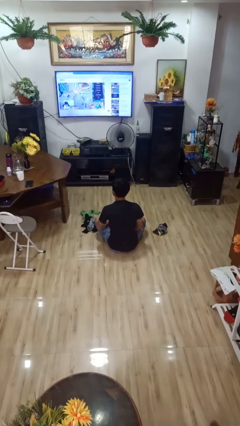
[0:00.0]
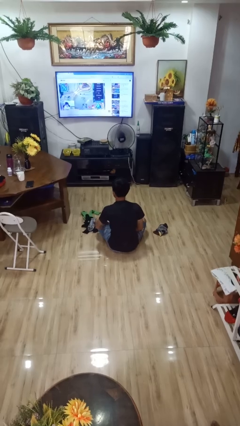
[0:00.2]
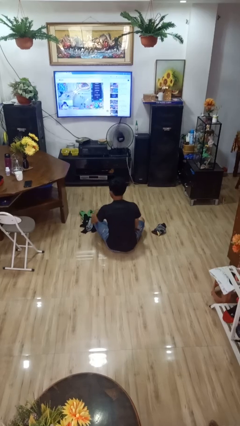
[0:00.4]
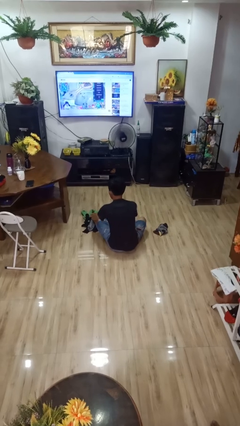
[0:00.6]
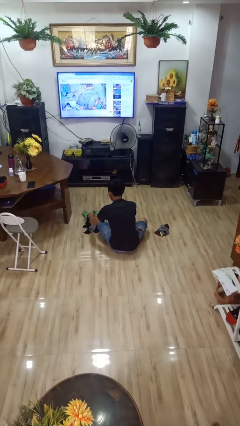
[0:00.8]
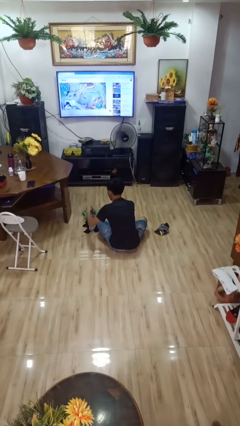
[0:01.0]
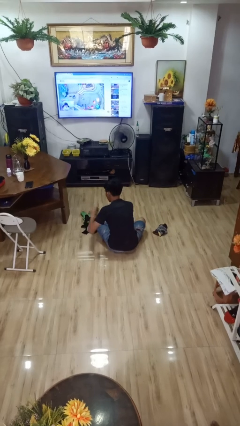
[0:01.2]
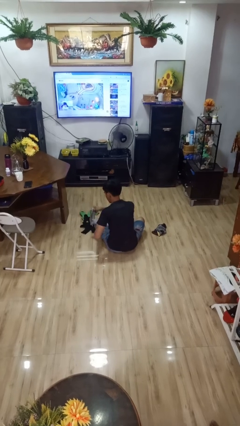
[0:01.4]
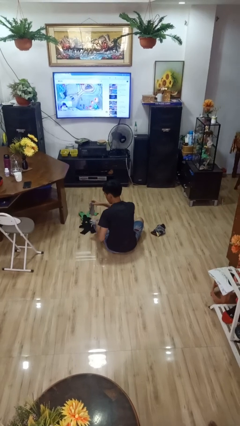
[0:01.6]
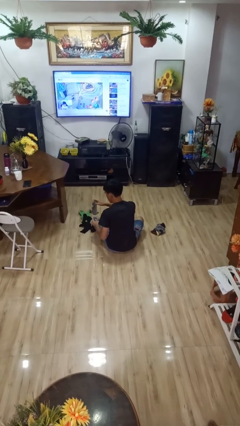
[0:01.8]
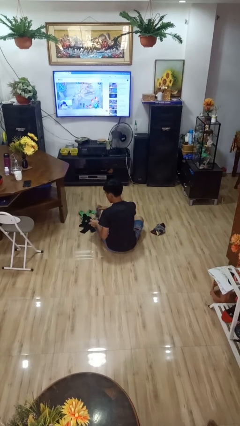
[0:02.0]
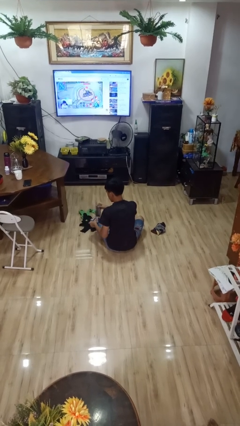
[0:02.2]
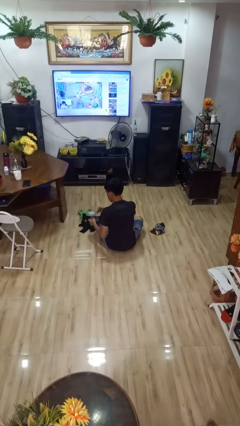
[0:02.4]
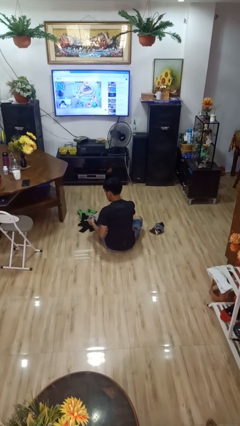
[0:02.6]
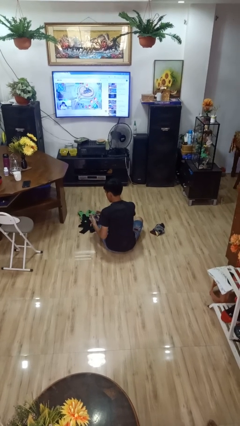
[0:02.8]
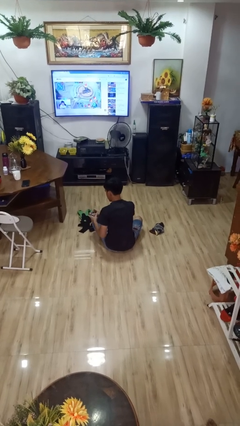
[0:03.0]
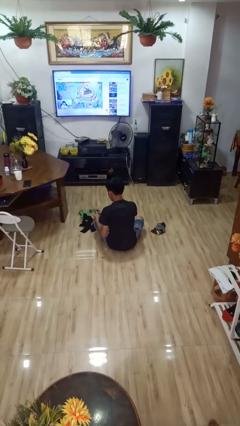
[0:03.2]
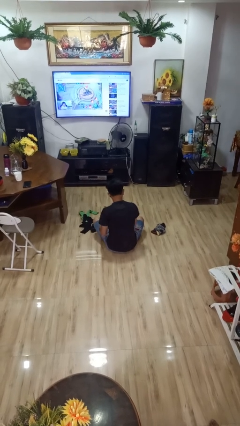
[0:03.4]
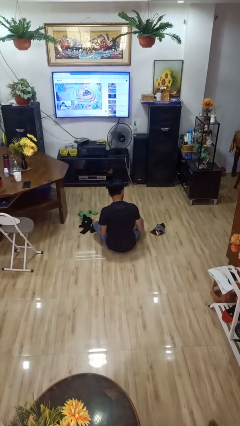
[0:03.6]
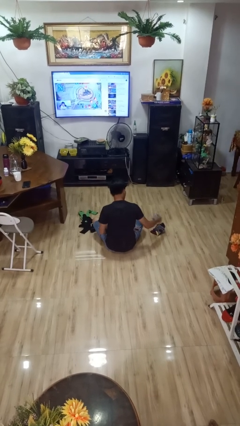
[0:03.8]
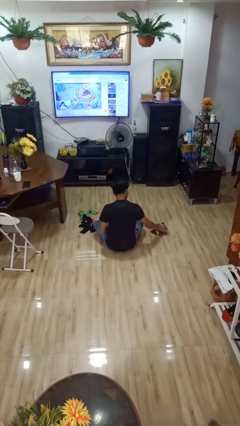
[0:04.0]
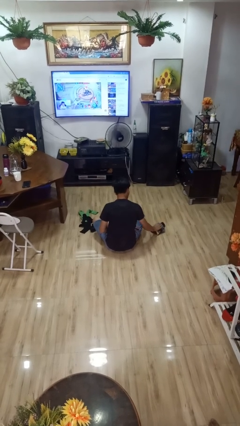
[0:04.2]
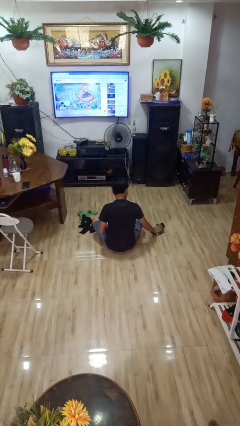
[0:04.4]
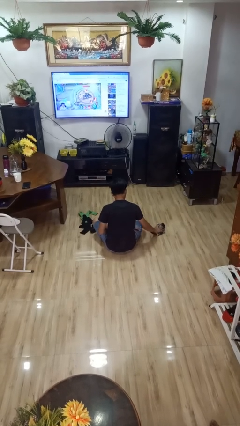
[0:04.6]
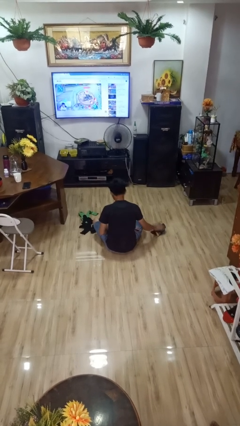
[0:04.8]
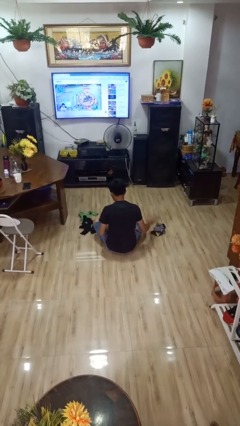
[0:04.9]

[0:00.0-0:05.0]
person folds socks

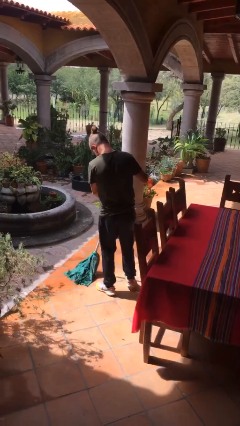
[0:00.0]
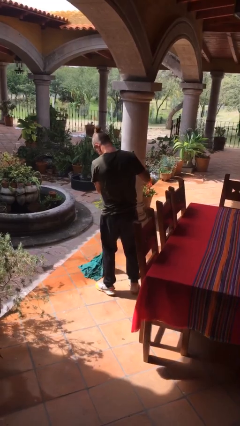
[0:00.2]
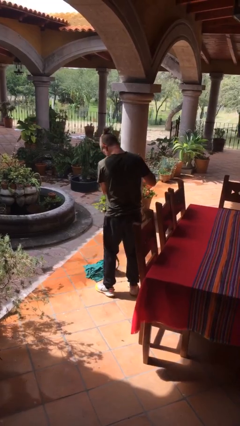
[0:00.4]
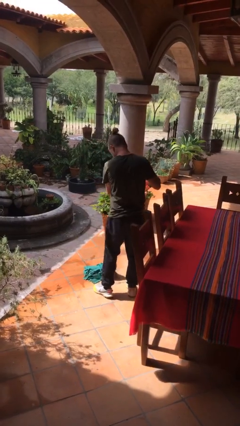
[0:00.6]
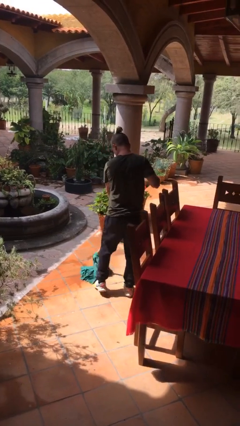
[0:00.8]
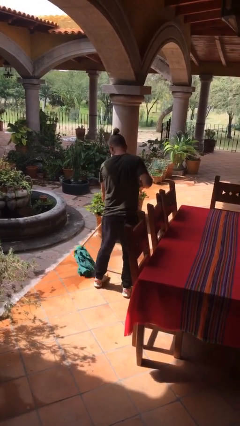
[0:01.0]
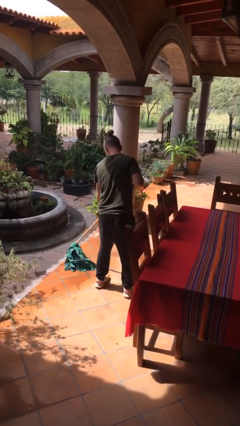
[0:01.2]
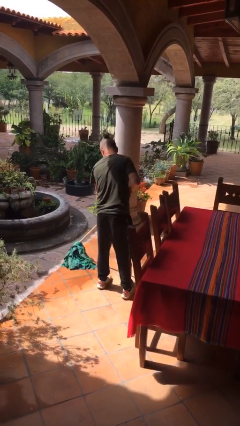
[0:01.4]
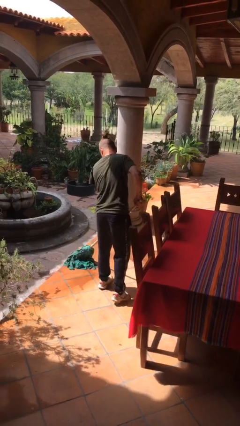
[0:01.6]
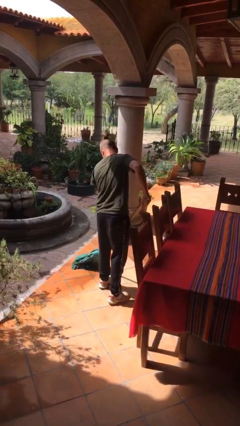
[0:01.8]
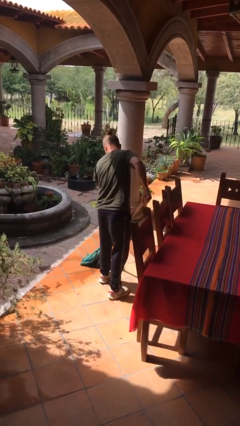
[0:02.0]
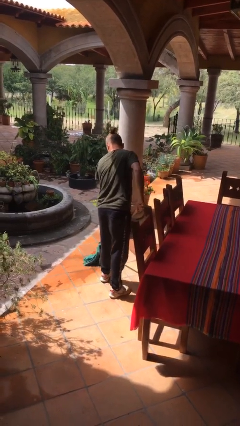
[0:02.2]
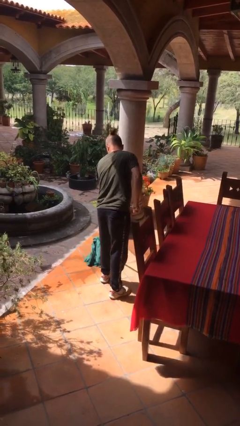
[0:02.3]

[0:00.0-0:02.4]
person mops

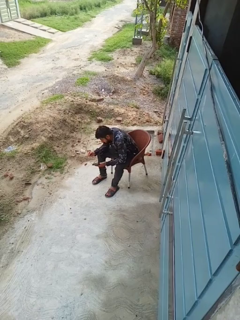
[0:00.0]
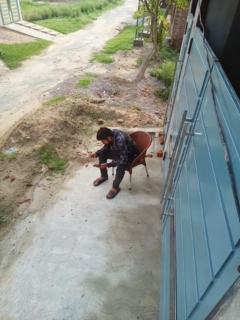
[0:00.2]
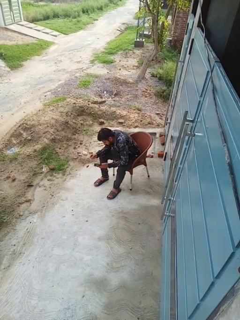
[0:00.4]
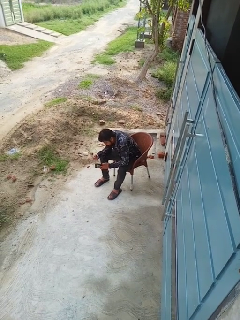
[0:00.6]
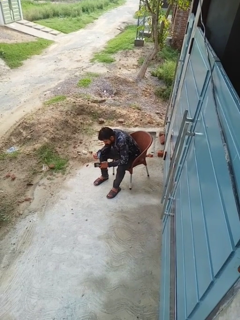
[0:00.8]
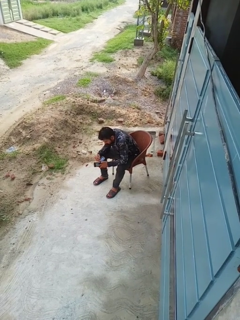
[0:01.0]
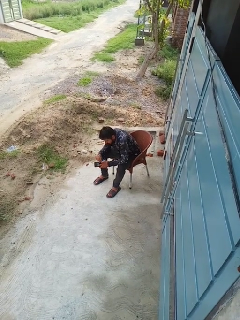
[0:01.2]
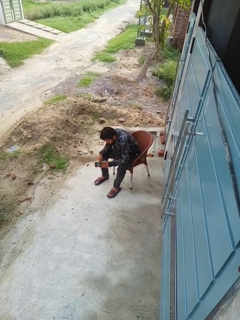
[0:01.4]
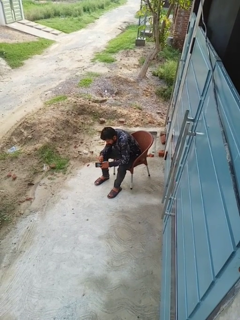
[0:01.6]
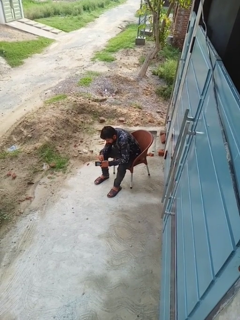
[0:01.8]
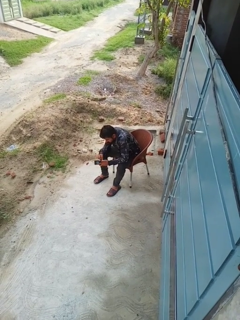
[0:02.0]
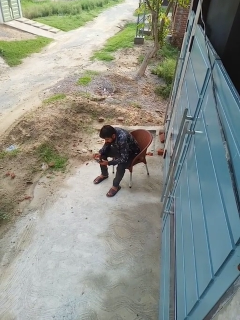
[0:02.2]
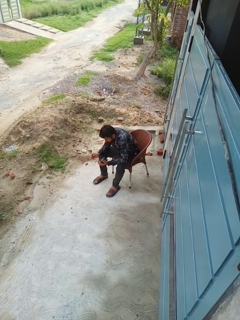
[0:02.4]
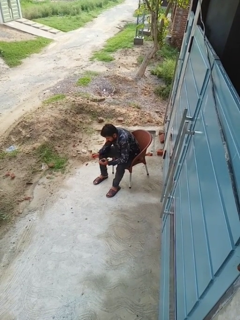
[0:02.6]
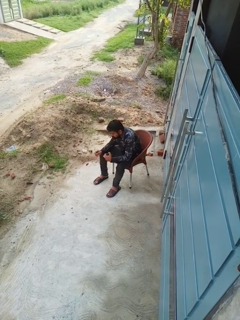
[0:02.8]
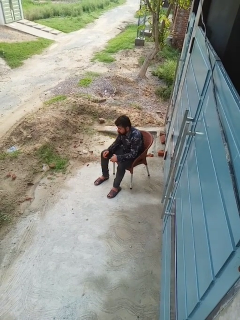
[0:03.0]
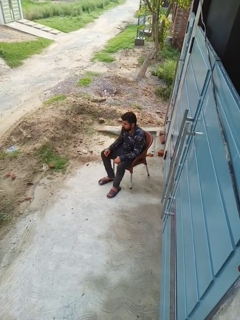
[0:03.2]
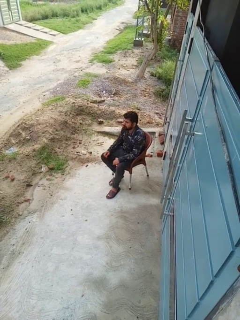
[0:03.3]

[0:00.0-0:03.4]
person puts object into purse

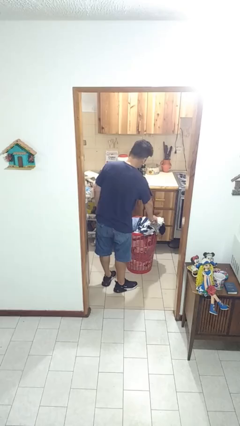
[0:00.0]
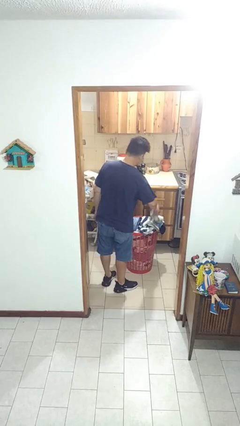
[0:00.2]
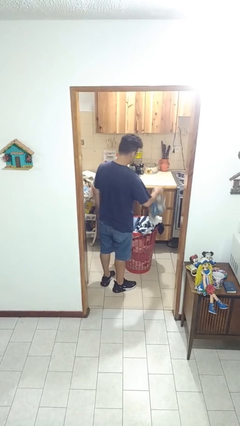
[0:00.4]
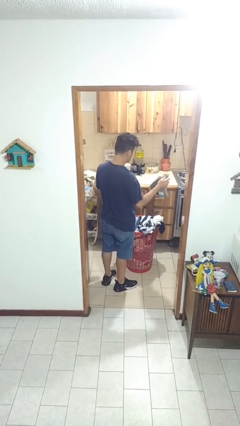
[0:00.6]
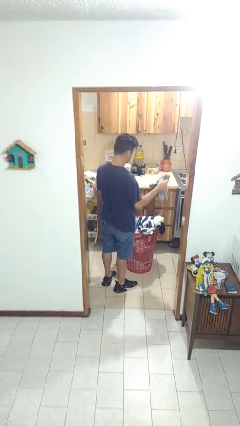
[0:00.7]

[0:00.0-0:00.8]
person takes object from basket

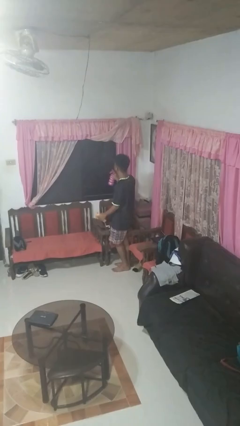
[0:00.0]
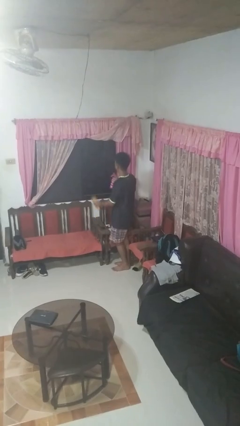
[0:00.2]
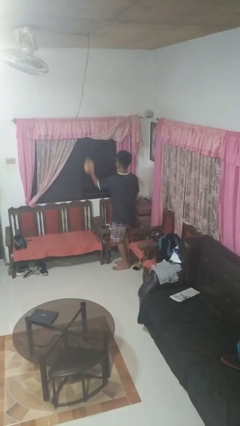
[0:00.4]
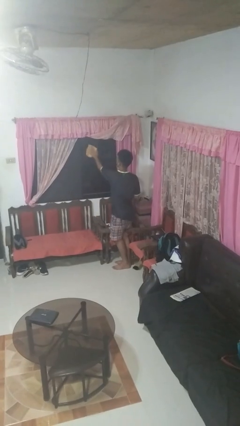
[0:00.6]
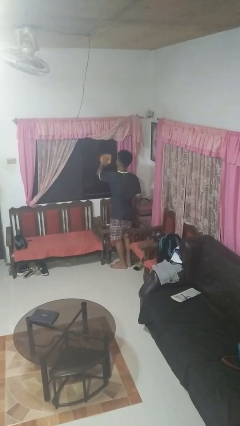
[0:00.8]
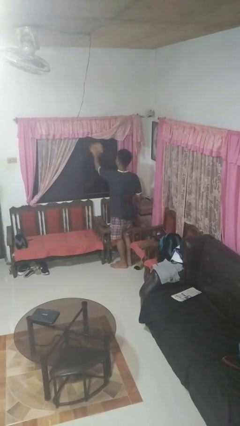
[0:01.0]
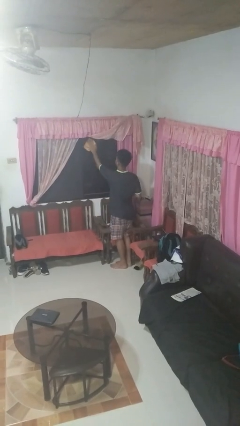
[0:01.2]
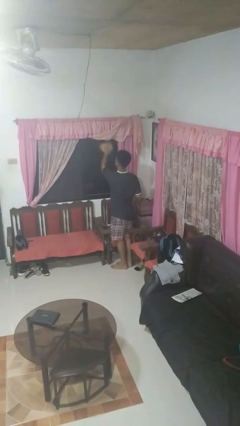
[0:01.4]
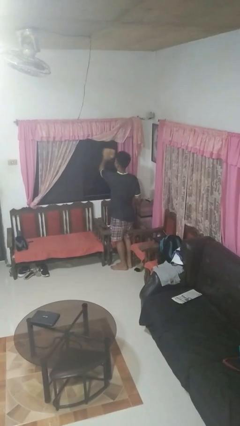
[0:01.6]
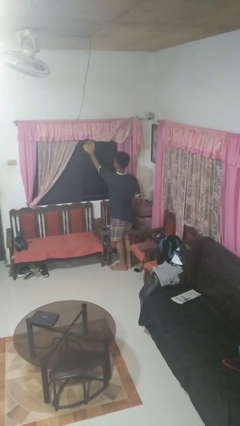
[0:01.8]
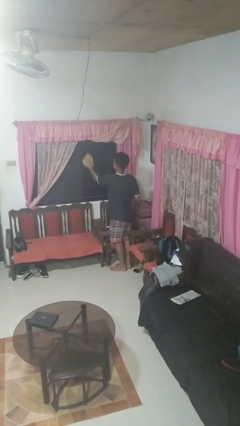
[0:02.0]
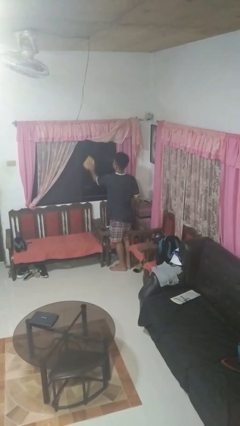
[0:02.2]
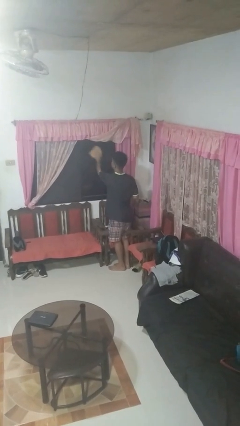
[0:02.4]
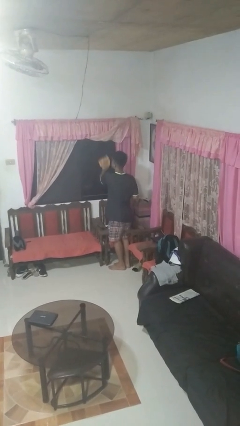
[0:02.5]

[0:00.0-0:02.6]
person washes window

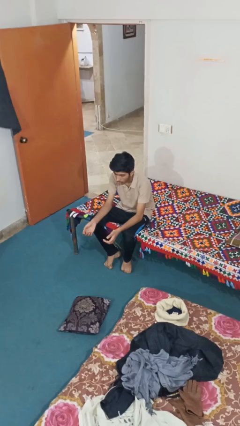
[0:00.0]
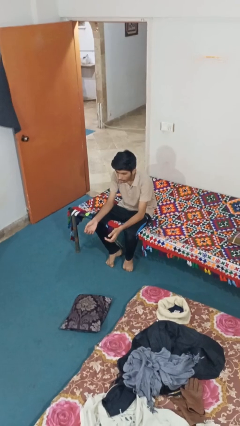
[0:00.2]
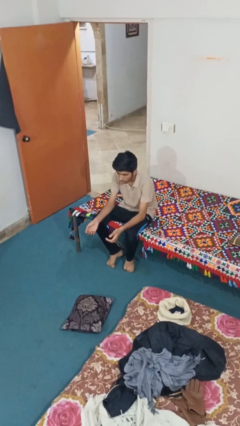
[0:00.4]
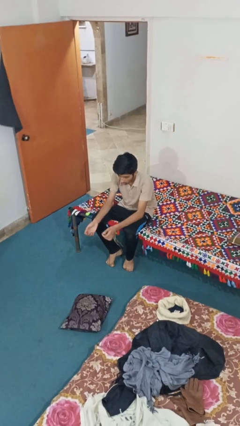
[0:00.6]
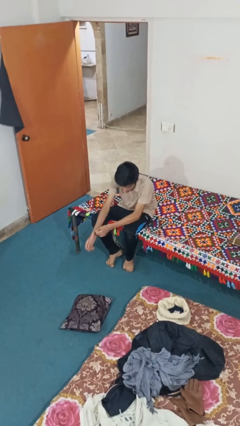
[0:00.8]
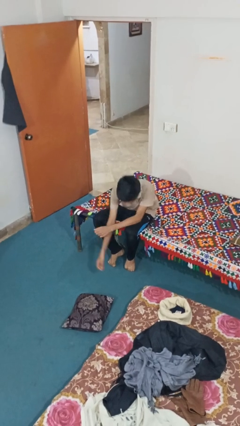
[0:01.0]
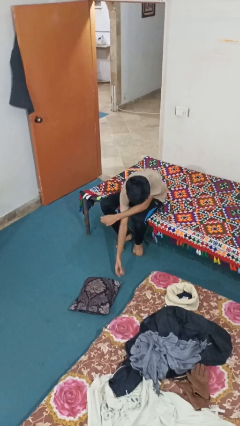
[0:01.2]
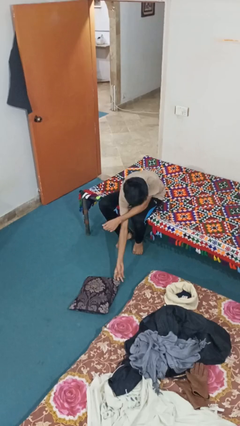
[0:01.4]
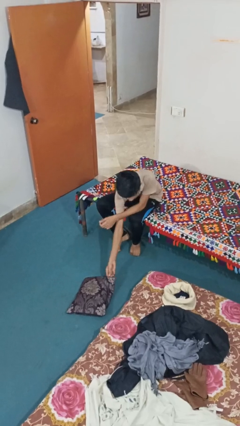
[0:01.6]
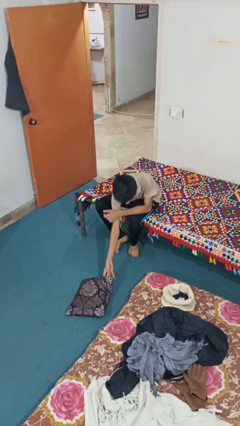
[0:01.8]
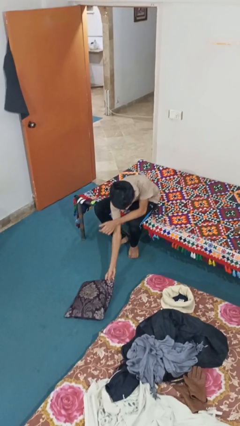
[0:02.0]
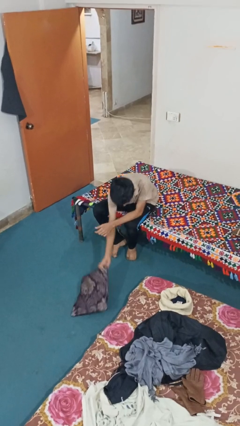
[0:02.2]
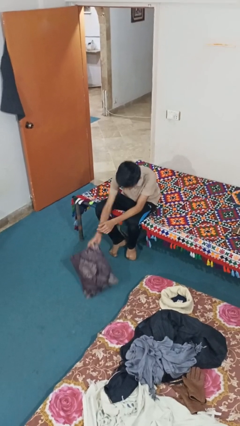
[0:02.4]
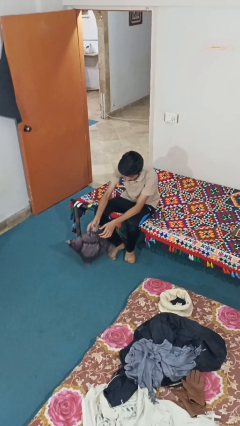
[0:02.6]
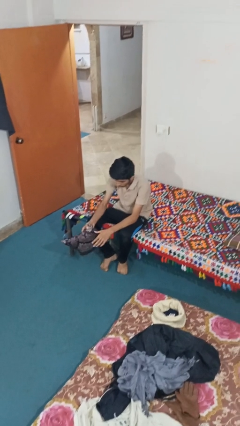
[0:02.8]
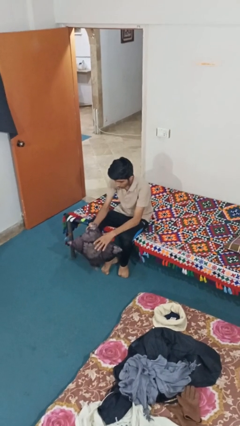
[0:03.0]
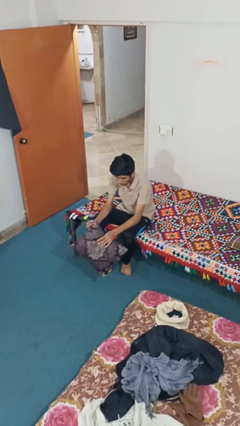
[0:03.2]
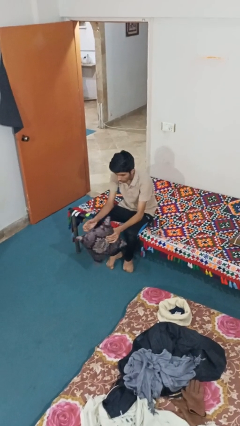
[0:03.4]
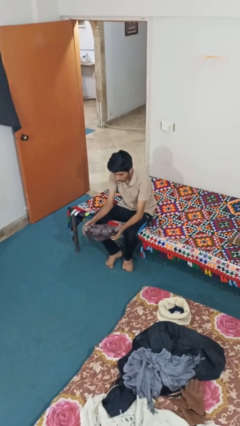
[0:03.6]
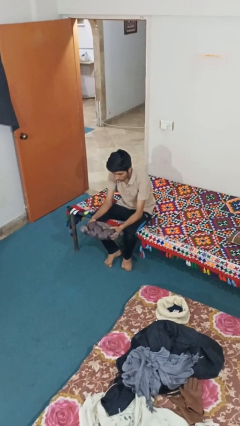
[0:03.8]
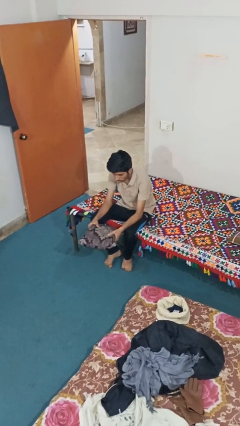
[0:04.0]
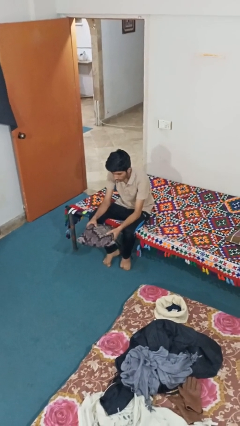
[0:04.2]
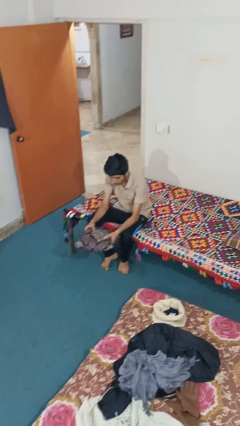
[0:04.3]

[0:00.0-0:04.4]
person picks up object from floor
